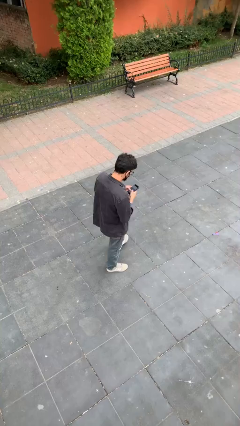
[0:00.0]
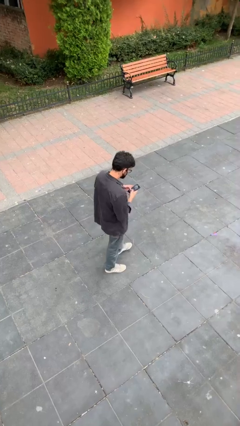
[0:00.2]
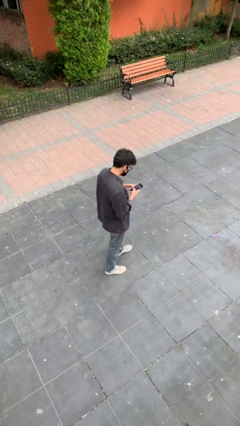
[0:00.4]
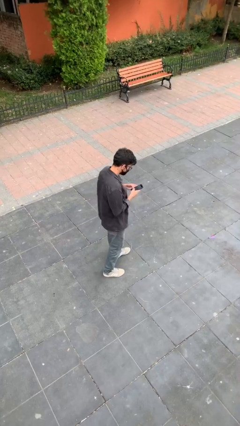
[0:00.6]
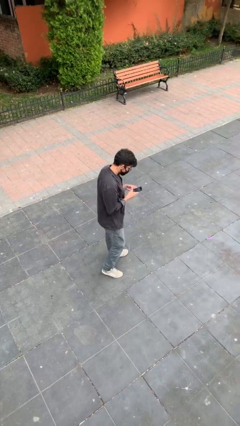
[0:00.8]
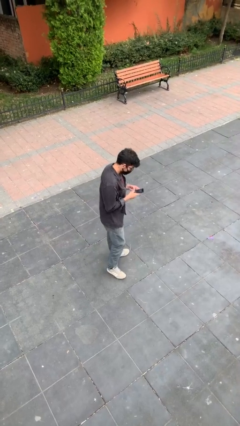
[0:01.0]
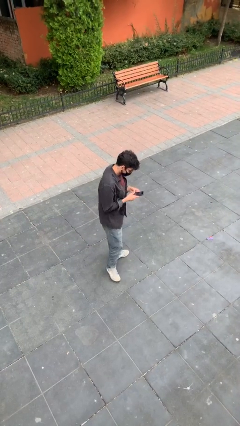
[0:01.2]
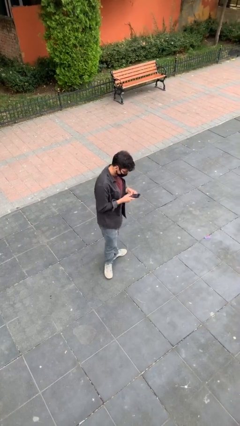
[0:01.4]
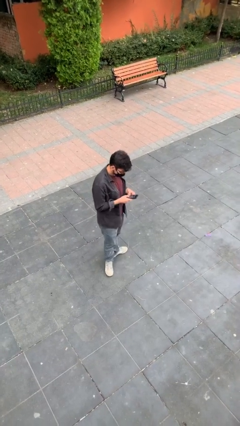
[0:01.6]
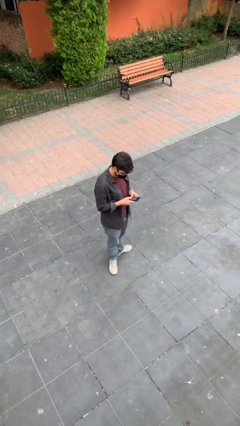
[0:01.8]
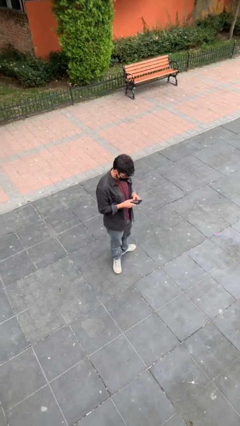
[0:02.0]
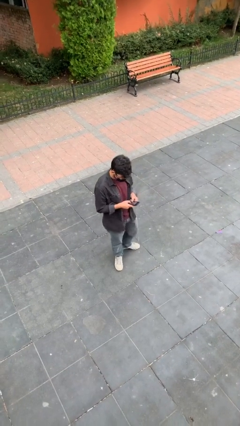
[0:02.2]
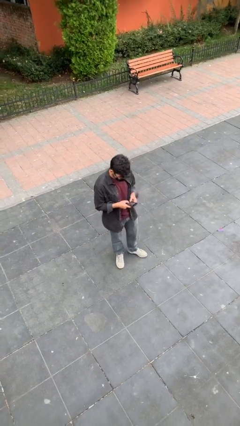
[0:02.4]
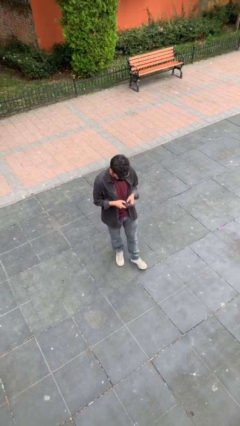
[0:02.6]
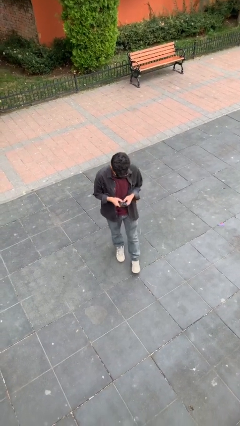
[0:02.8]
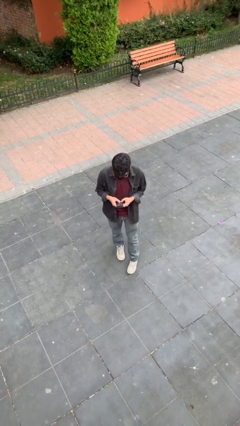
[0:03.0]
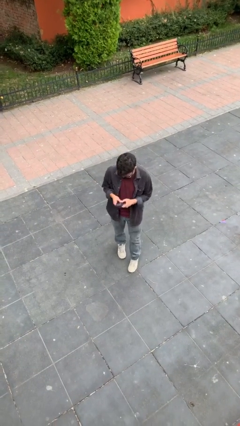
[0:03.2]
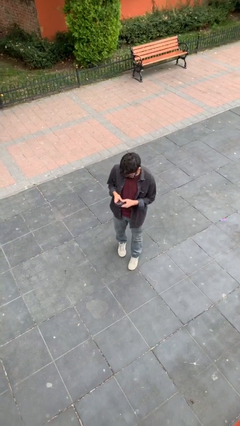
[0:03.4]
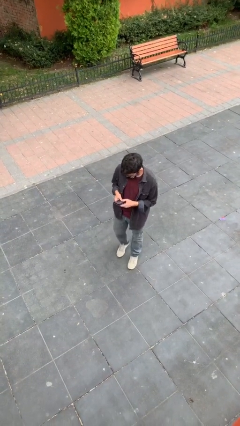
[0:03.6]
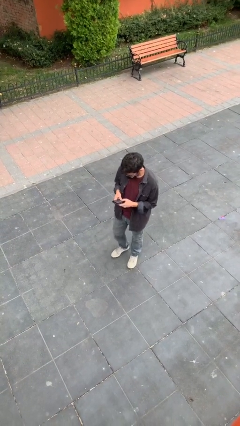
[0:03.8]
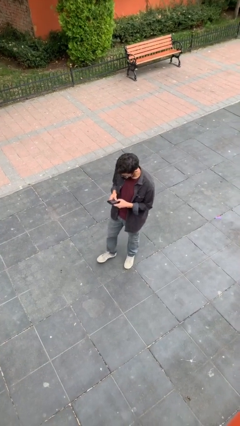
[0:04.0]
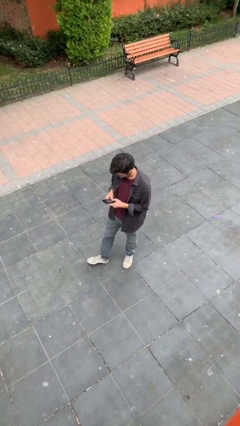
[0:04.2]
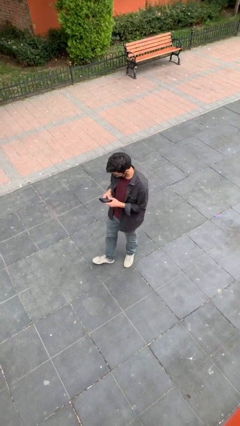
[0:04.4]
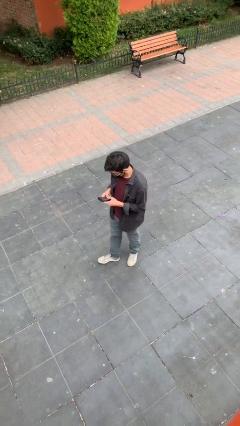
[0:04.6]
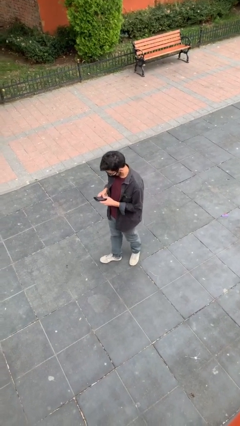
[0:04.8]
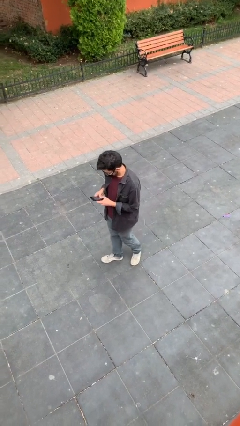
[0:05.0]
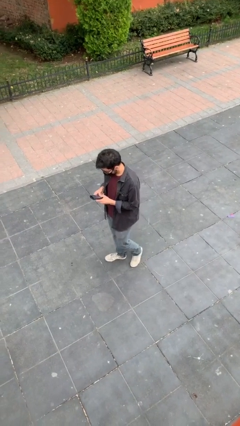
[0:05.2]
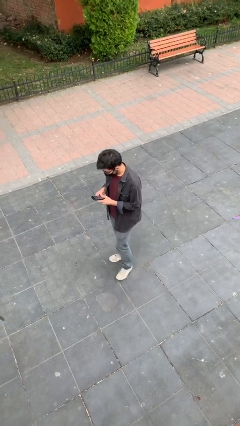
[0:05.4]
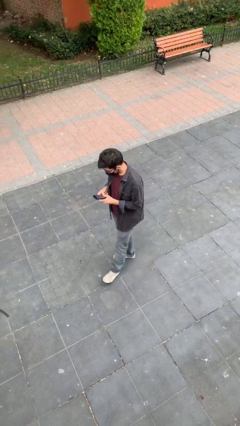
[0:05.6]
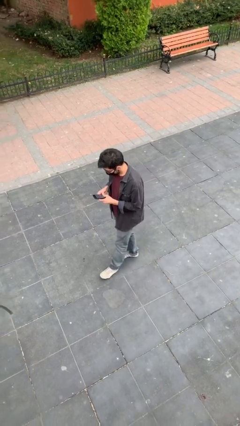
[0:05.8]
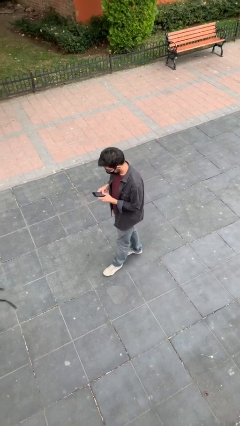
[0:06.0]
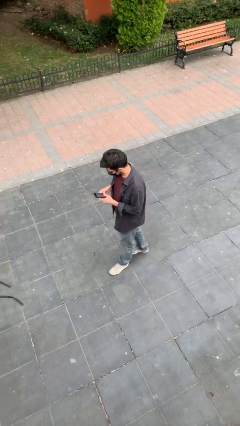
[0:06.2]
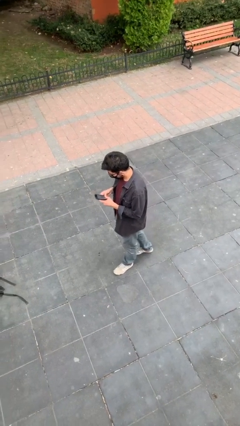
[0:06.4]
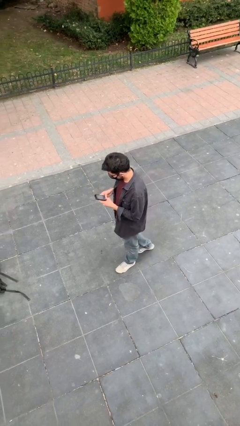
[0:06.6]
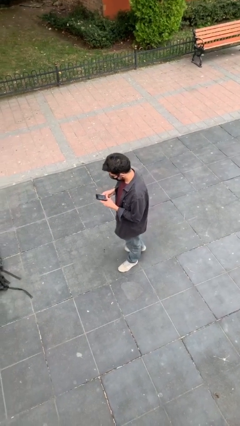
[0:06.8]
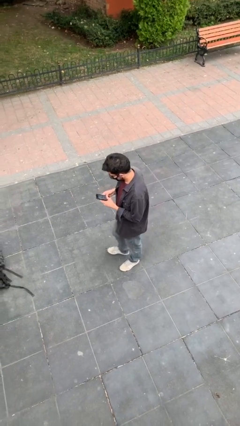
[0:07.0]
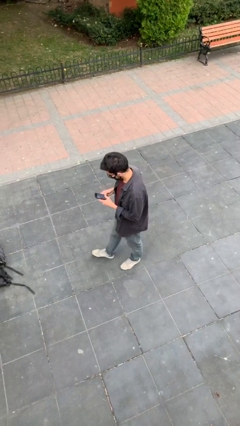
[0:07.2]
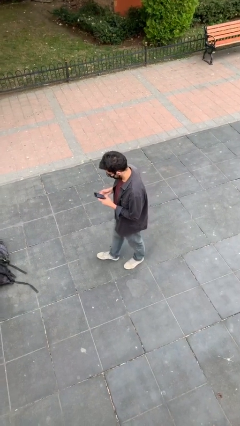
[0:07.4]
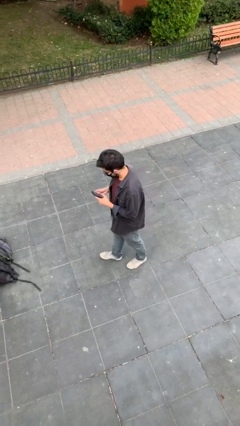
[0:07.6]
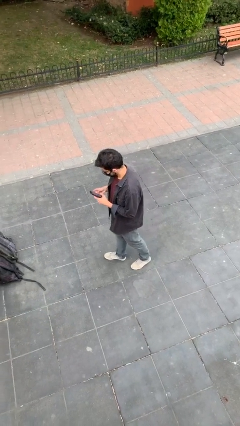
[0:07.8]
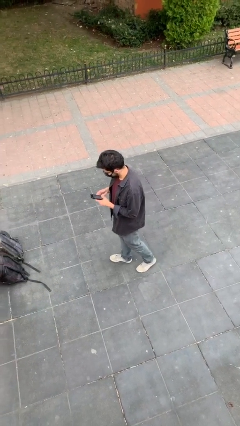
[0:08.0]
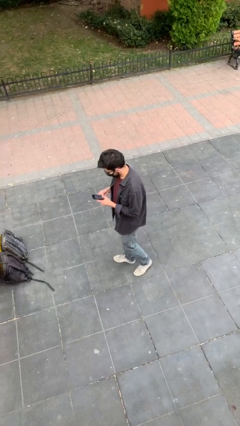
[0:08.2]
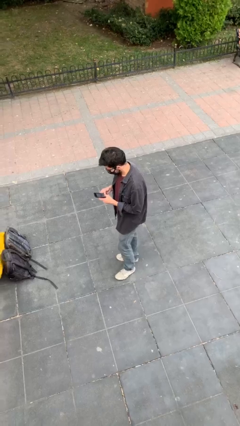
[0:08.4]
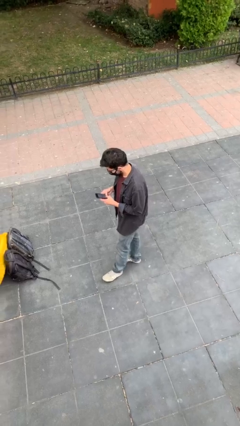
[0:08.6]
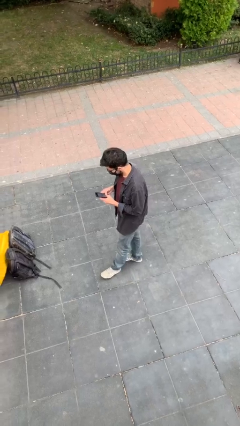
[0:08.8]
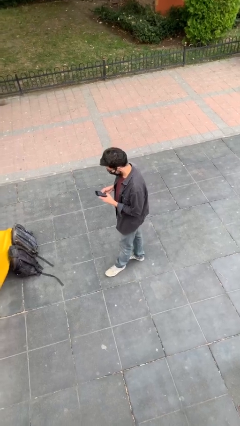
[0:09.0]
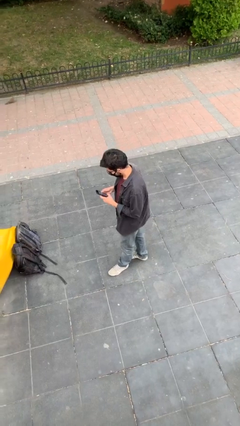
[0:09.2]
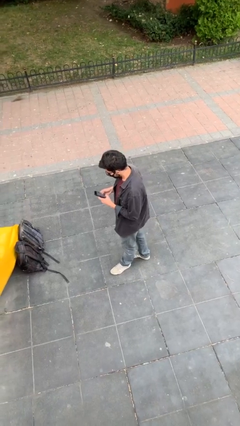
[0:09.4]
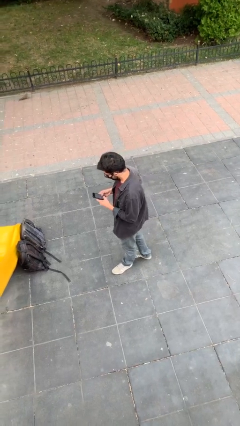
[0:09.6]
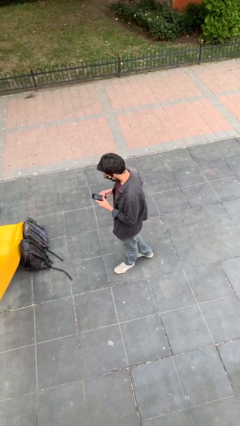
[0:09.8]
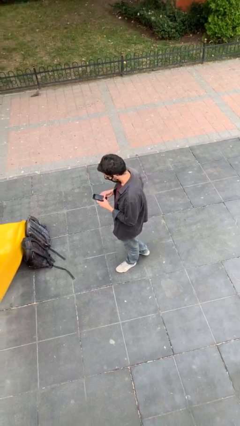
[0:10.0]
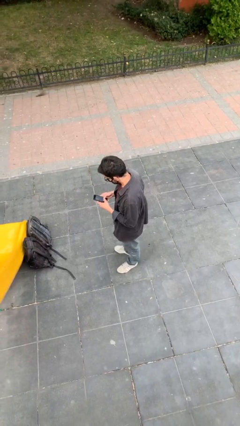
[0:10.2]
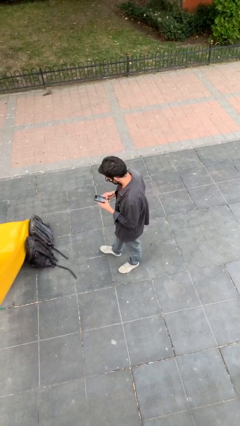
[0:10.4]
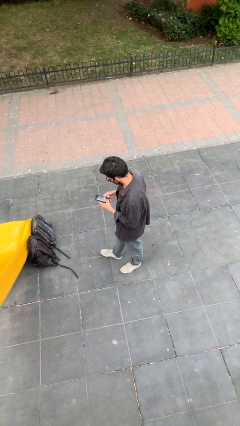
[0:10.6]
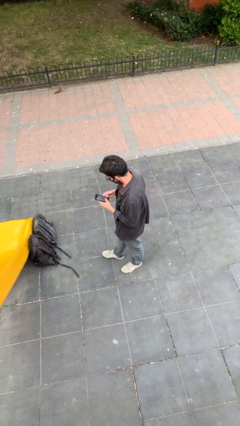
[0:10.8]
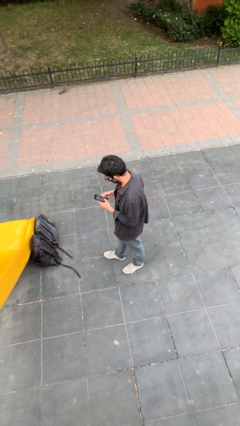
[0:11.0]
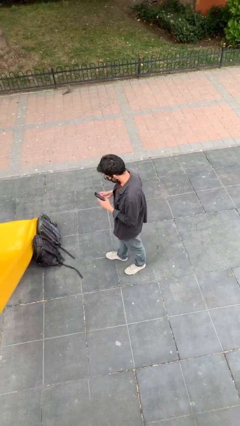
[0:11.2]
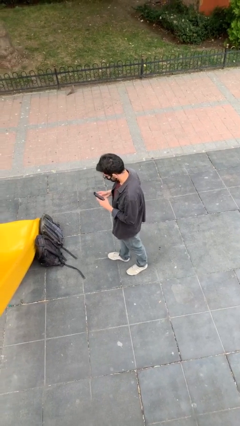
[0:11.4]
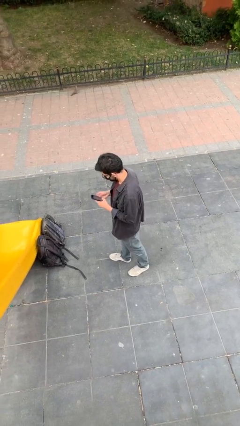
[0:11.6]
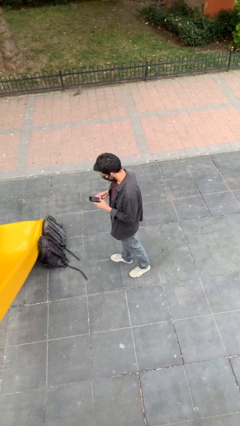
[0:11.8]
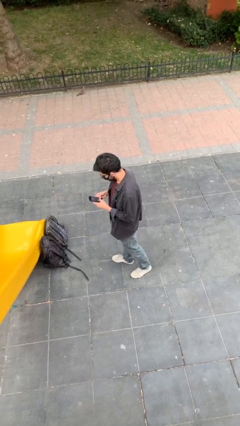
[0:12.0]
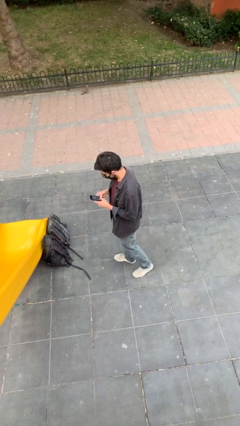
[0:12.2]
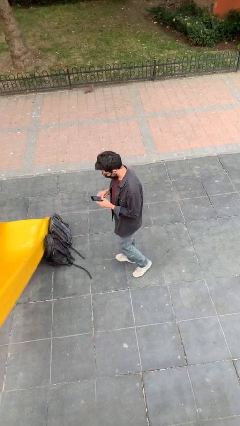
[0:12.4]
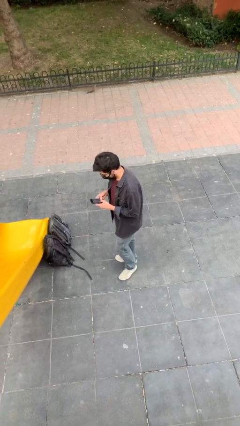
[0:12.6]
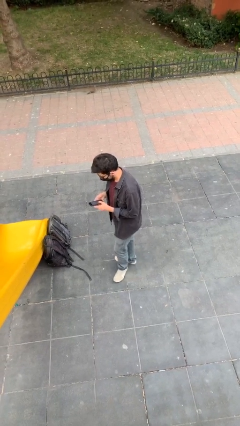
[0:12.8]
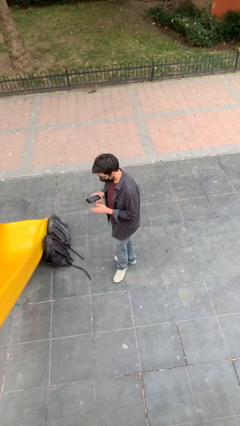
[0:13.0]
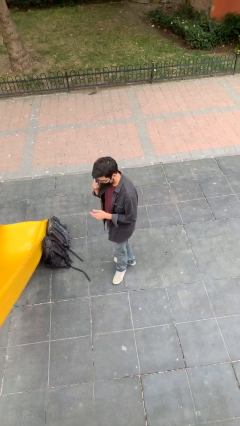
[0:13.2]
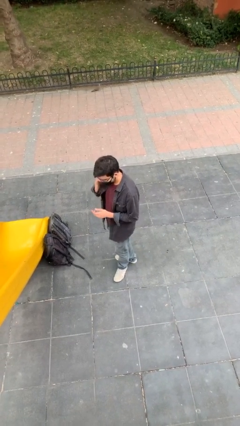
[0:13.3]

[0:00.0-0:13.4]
person texts on phone

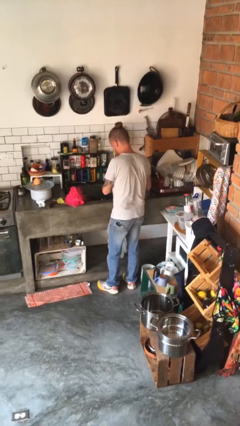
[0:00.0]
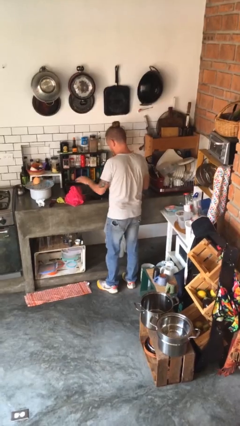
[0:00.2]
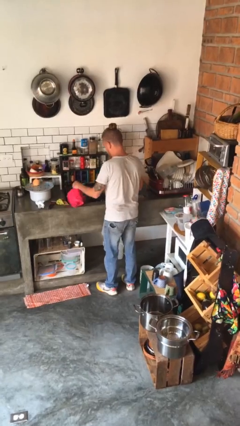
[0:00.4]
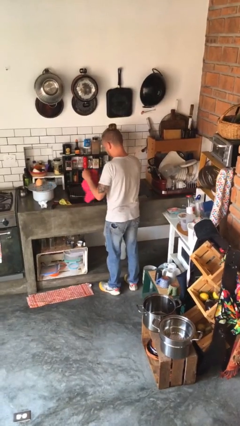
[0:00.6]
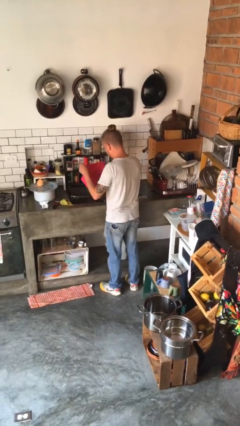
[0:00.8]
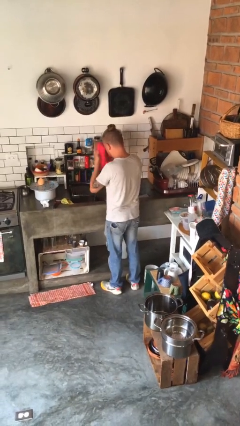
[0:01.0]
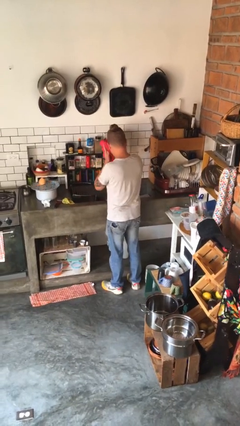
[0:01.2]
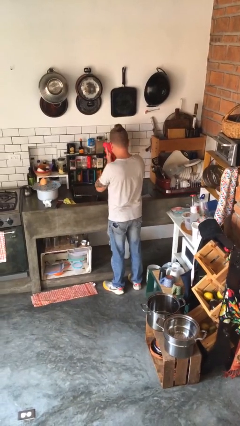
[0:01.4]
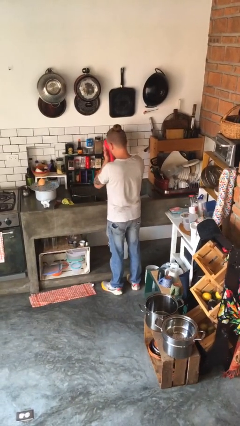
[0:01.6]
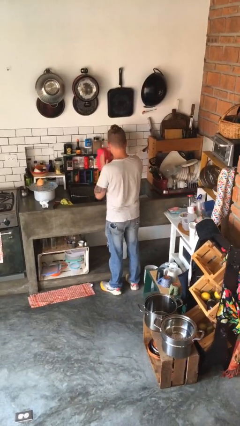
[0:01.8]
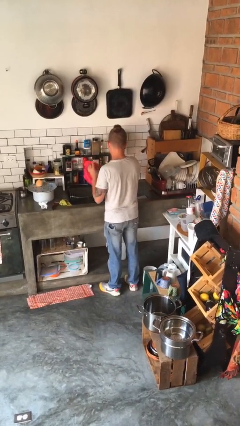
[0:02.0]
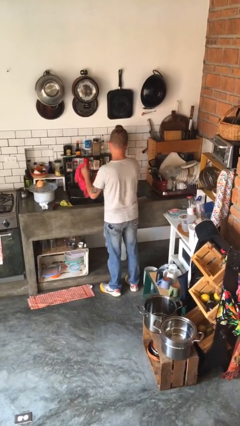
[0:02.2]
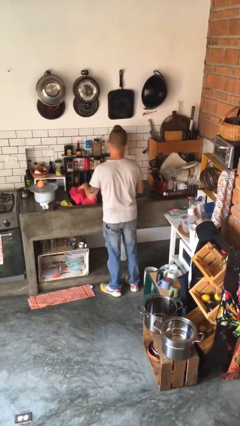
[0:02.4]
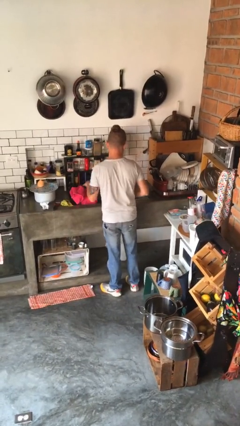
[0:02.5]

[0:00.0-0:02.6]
person dries face with towel

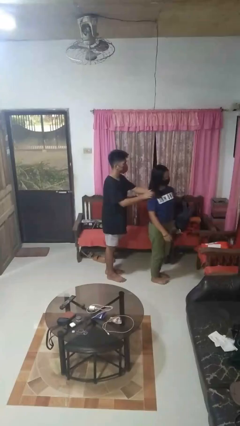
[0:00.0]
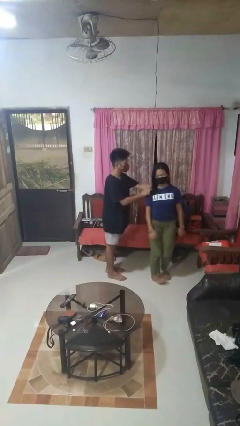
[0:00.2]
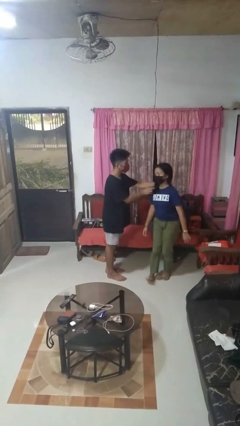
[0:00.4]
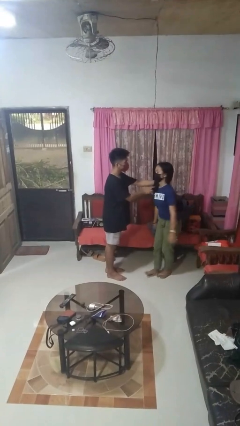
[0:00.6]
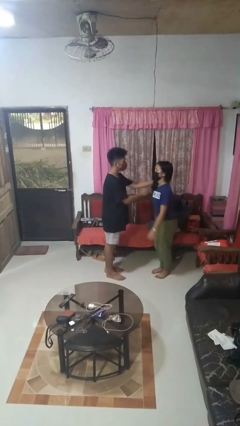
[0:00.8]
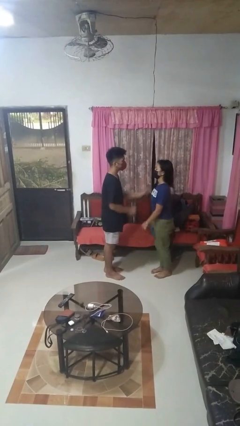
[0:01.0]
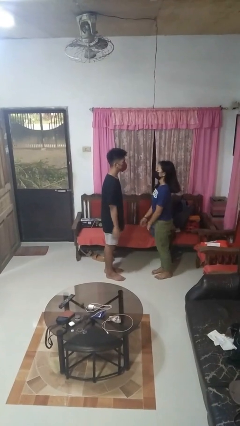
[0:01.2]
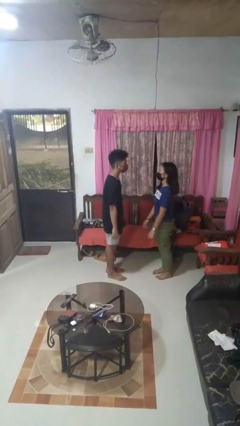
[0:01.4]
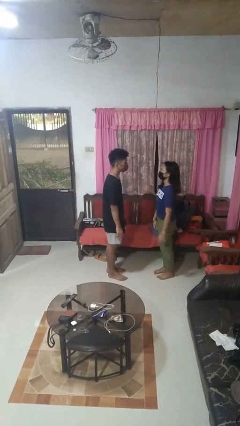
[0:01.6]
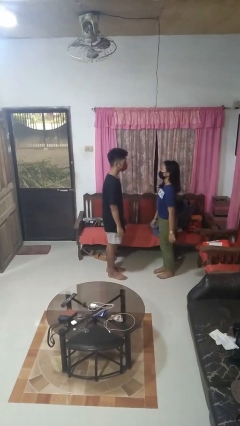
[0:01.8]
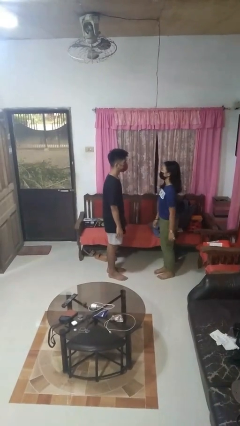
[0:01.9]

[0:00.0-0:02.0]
person spins person around
